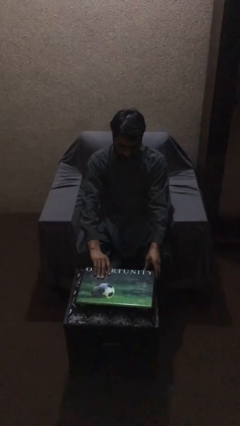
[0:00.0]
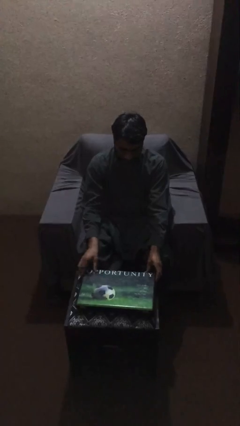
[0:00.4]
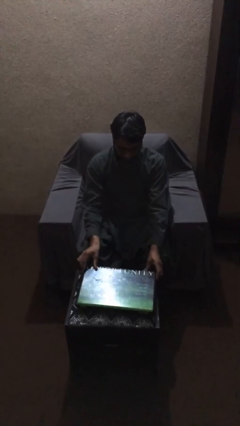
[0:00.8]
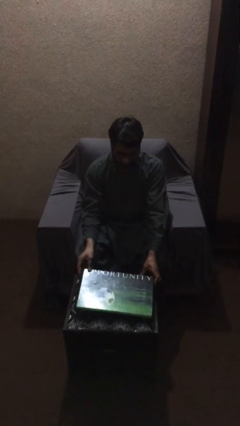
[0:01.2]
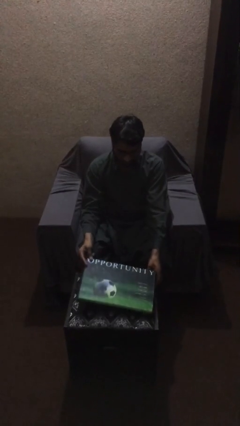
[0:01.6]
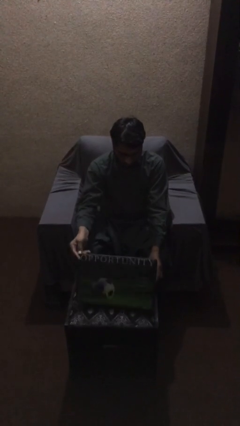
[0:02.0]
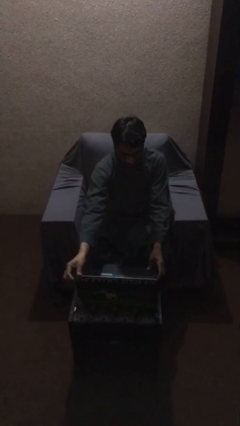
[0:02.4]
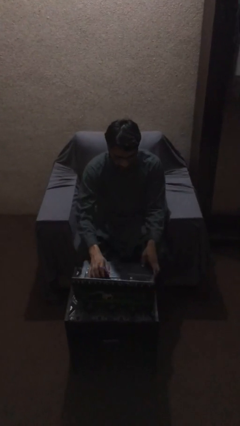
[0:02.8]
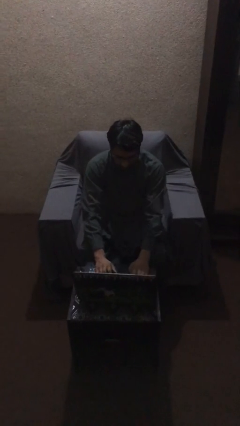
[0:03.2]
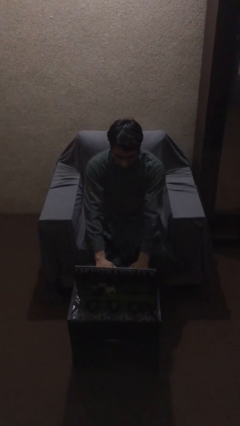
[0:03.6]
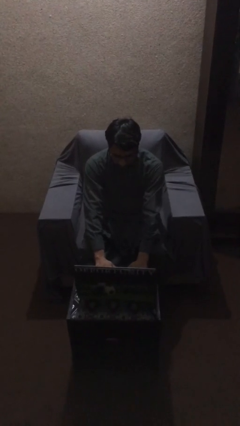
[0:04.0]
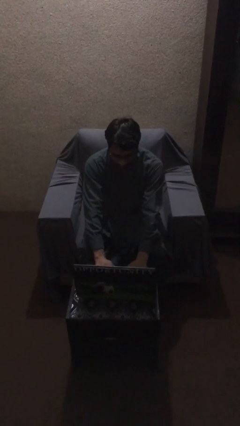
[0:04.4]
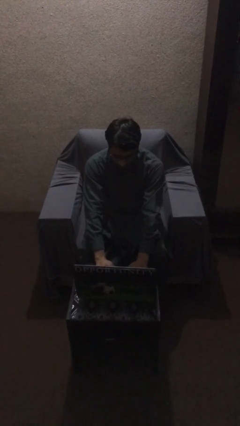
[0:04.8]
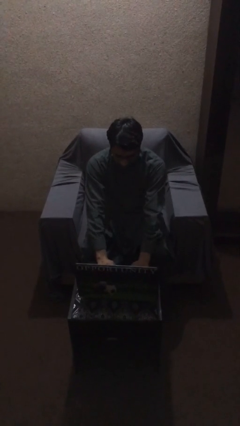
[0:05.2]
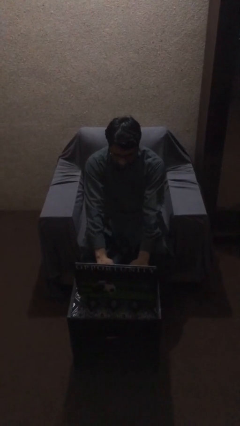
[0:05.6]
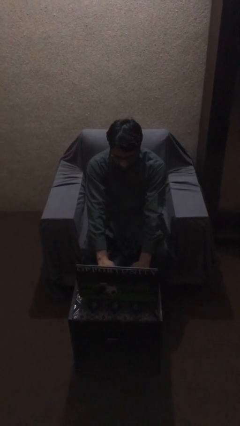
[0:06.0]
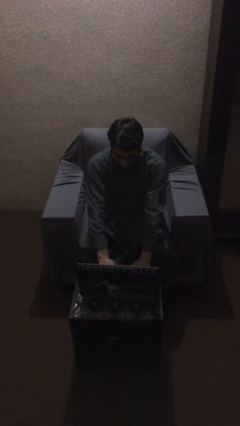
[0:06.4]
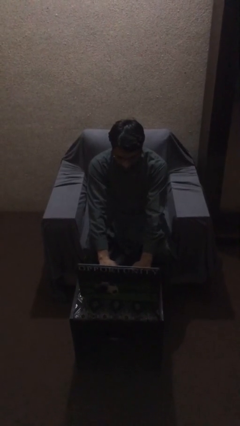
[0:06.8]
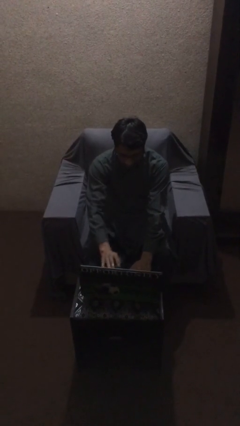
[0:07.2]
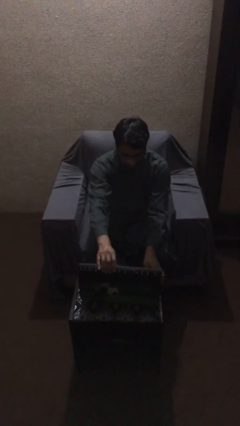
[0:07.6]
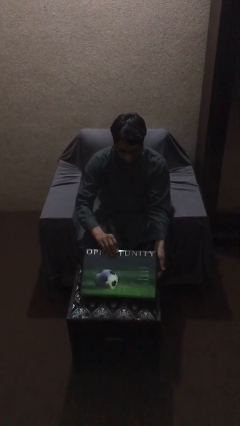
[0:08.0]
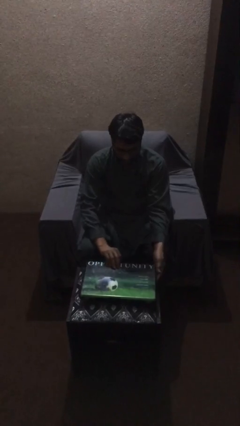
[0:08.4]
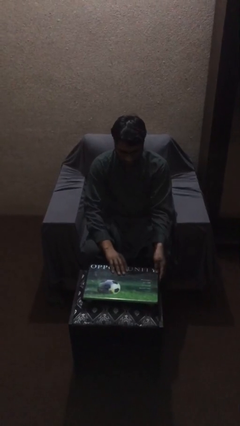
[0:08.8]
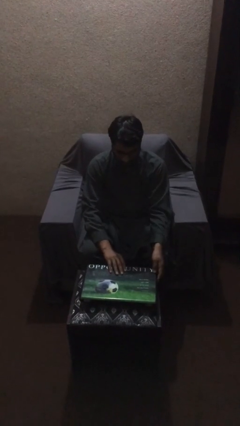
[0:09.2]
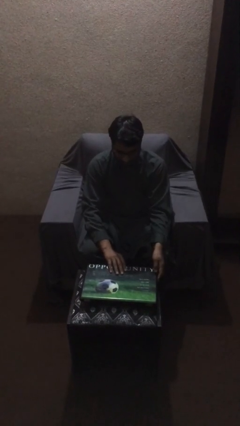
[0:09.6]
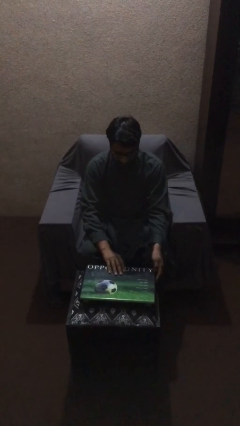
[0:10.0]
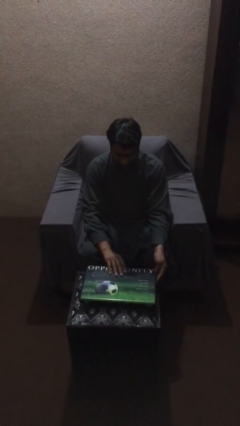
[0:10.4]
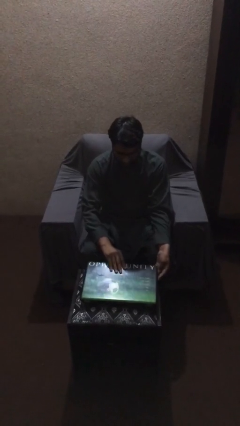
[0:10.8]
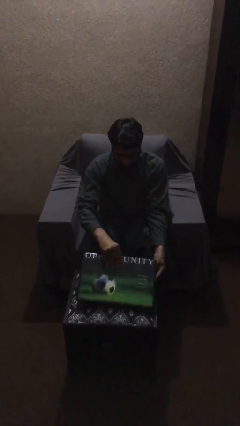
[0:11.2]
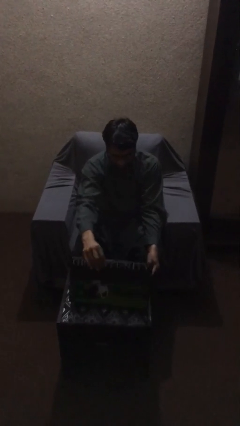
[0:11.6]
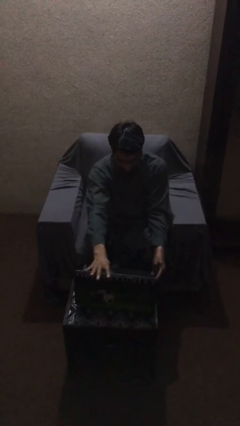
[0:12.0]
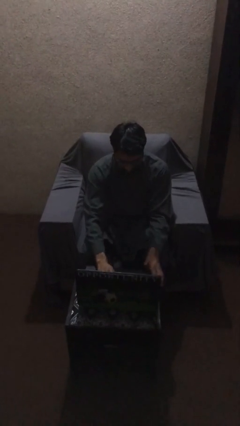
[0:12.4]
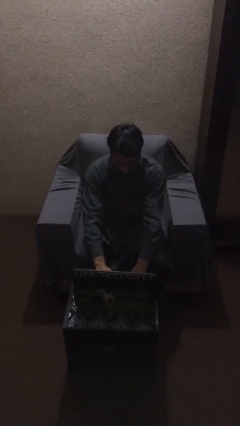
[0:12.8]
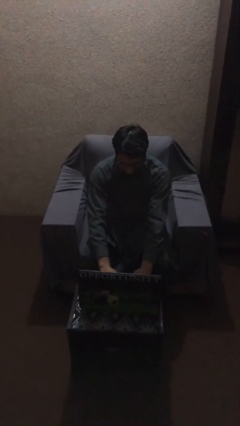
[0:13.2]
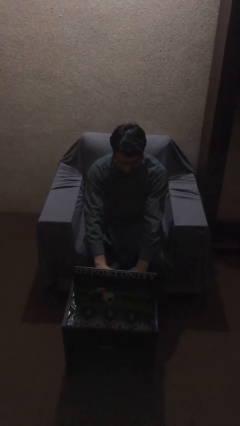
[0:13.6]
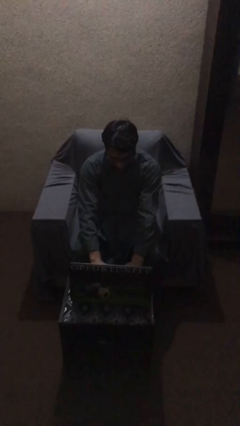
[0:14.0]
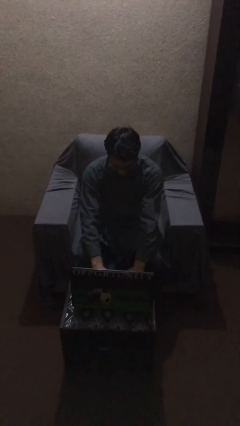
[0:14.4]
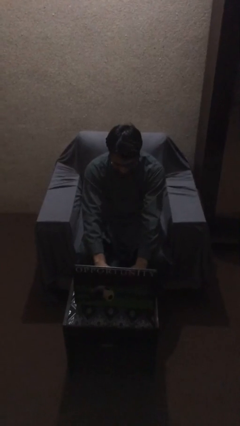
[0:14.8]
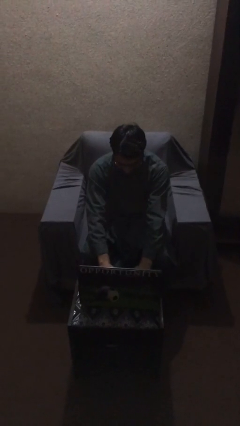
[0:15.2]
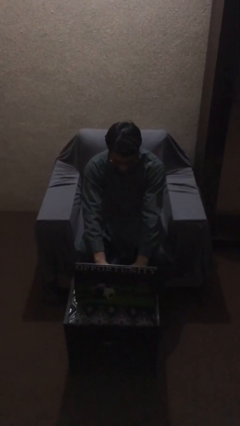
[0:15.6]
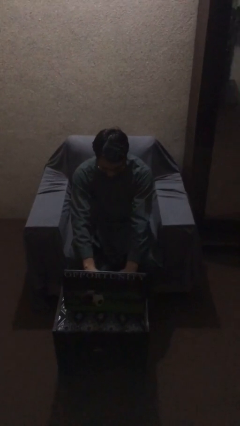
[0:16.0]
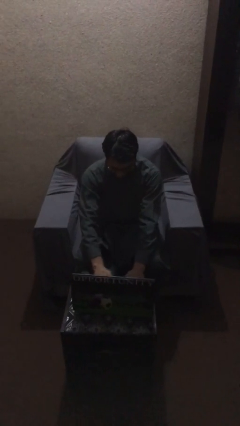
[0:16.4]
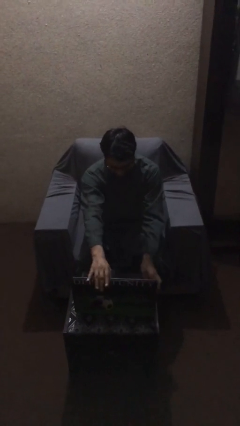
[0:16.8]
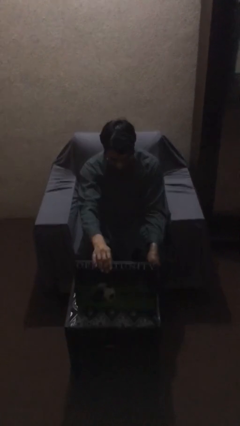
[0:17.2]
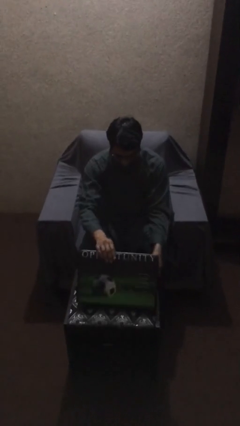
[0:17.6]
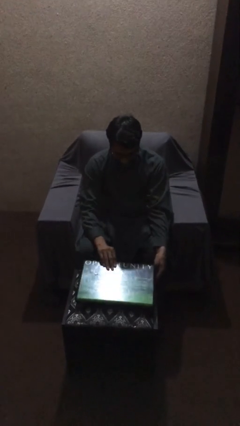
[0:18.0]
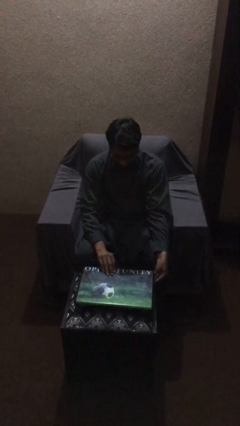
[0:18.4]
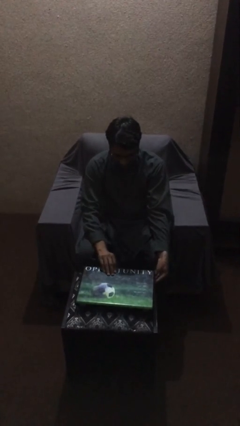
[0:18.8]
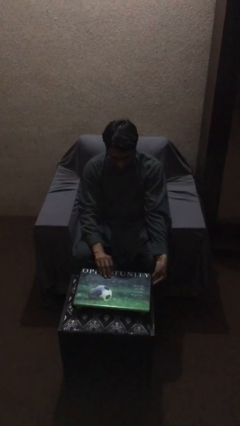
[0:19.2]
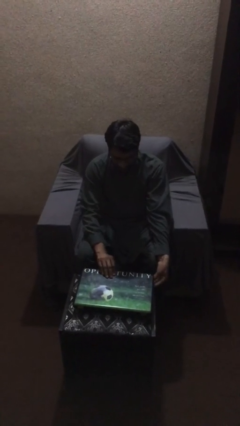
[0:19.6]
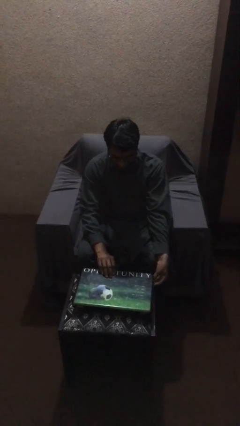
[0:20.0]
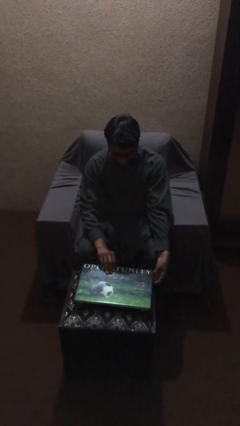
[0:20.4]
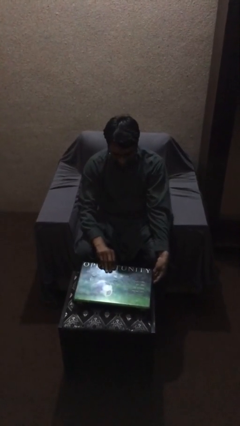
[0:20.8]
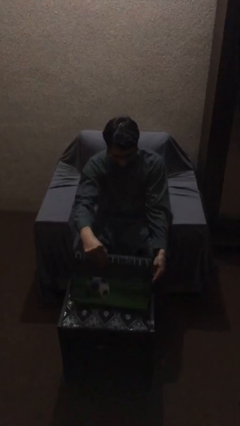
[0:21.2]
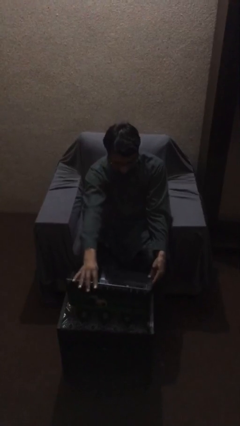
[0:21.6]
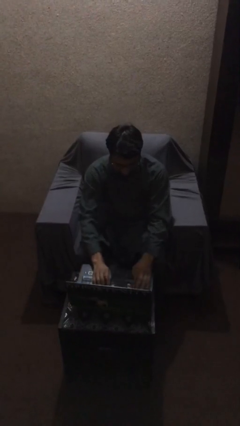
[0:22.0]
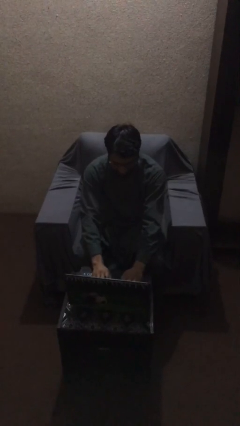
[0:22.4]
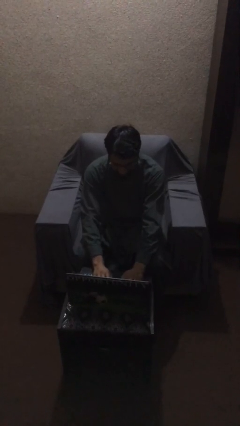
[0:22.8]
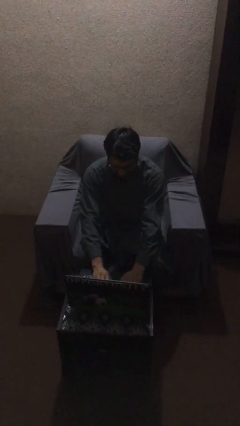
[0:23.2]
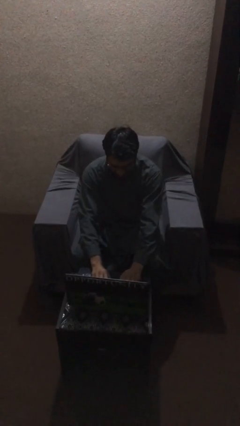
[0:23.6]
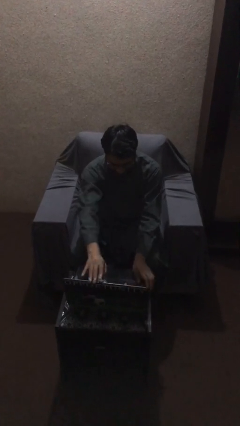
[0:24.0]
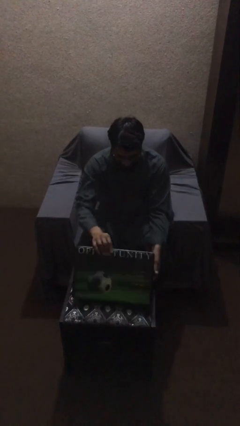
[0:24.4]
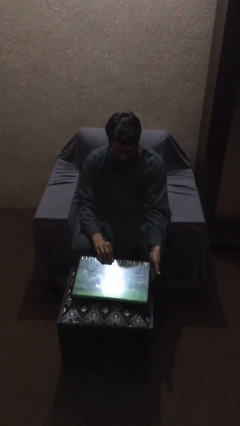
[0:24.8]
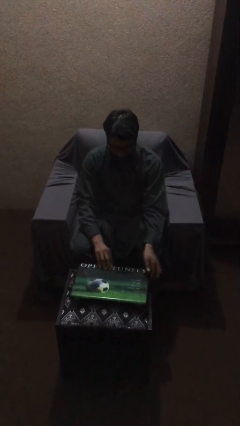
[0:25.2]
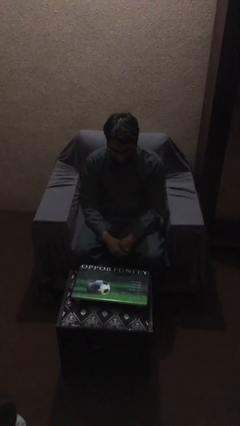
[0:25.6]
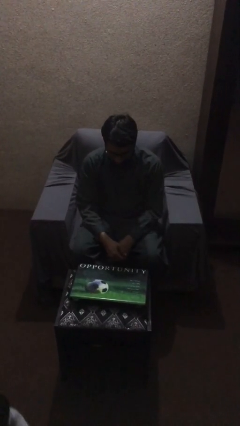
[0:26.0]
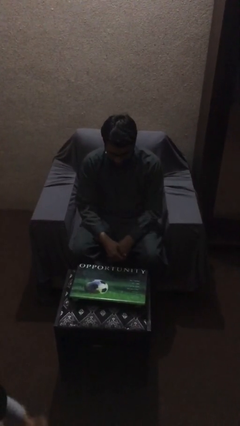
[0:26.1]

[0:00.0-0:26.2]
person interacts with laptop

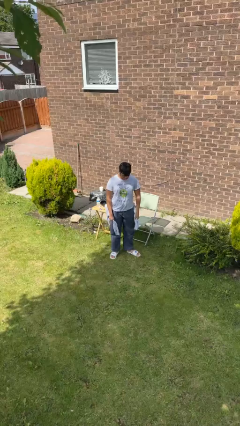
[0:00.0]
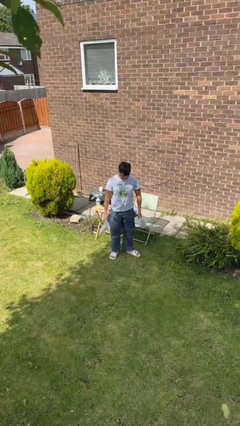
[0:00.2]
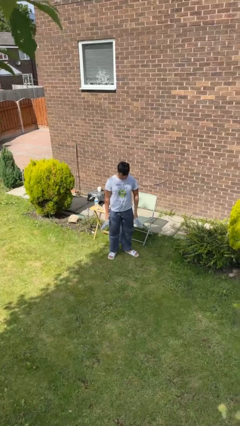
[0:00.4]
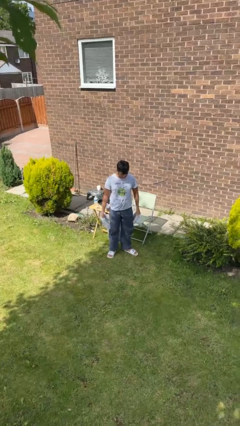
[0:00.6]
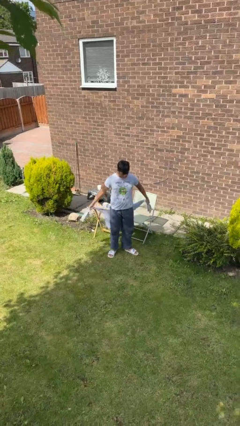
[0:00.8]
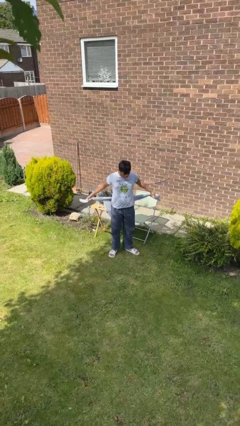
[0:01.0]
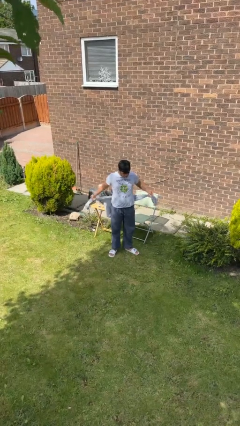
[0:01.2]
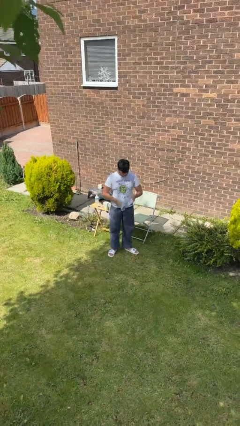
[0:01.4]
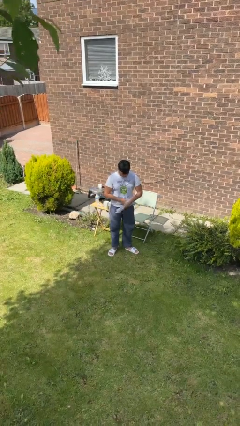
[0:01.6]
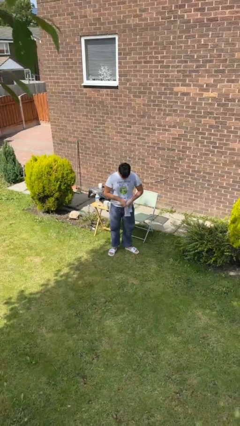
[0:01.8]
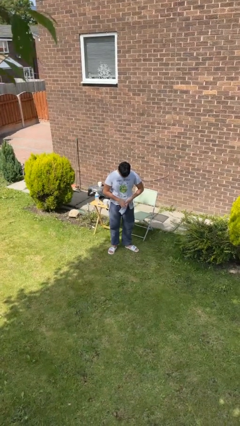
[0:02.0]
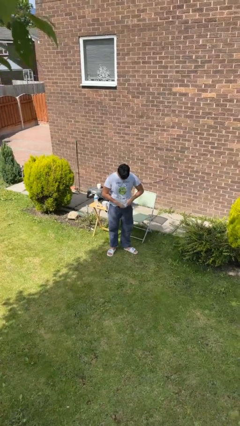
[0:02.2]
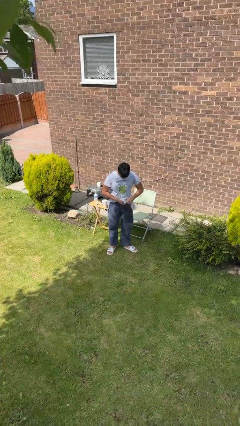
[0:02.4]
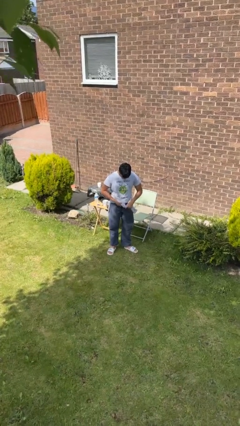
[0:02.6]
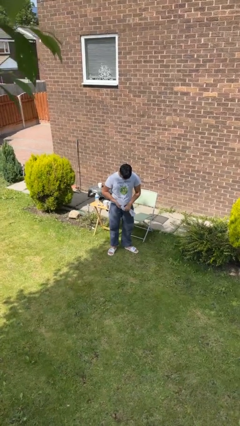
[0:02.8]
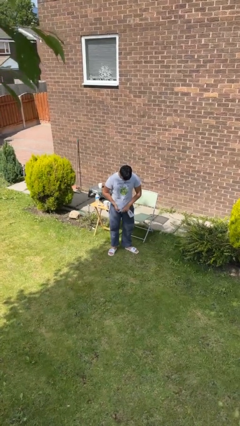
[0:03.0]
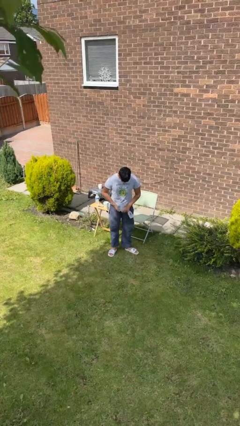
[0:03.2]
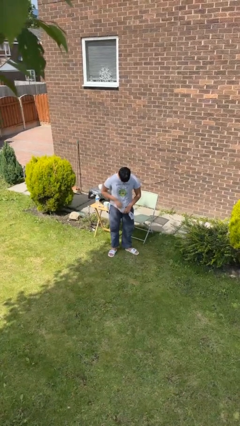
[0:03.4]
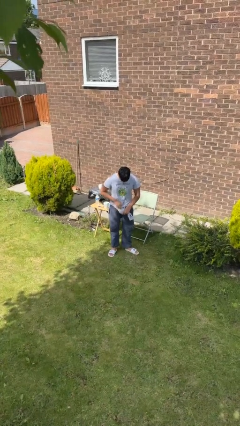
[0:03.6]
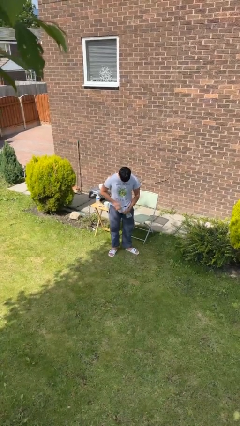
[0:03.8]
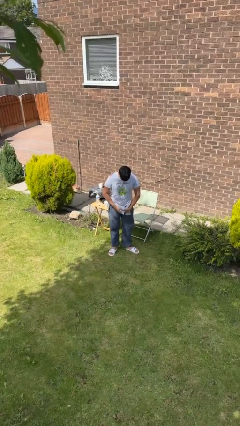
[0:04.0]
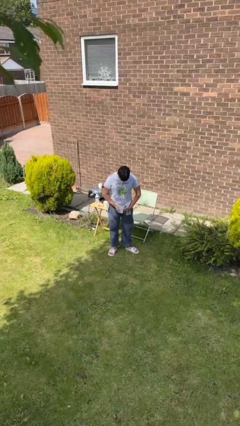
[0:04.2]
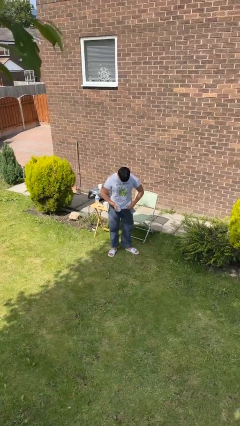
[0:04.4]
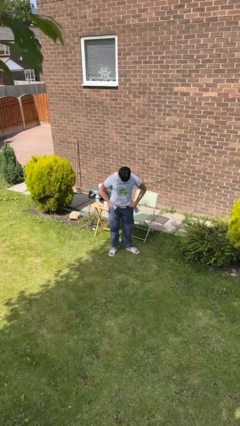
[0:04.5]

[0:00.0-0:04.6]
person ties jacket around waist

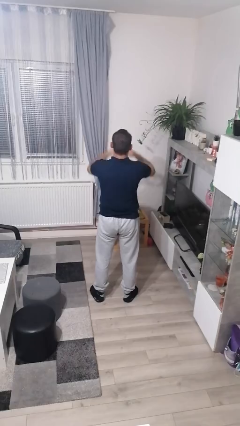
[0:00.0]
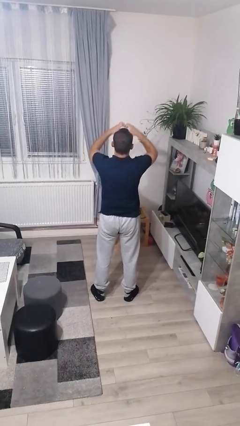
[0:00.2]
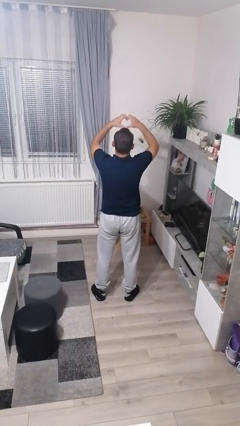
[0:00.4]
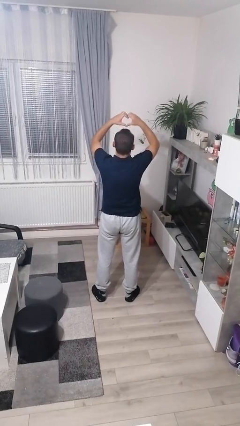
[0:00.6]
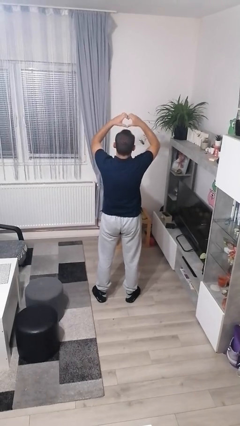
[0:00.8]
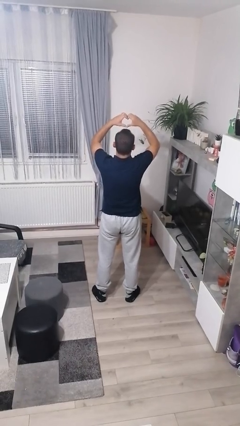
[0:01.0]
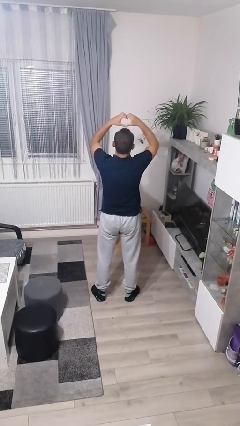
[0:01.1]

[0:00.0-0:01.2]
person gestures heart
